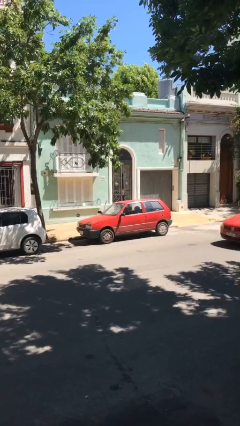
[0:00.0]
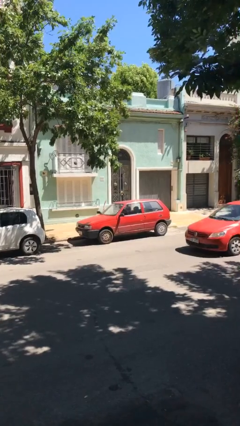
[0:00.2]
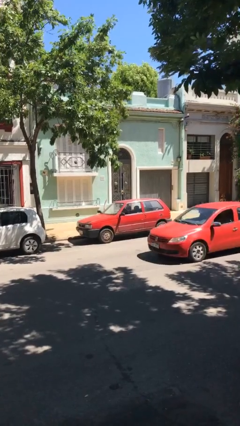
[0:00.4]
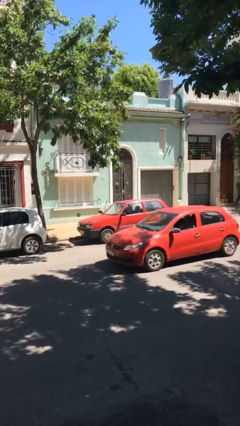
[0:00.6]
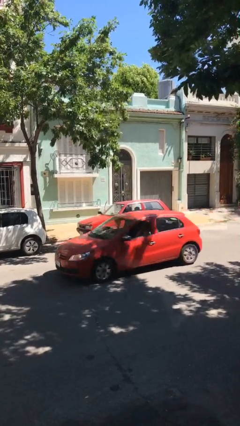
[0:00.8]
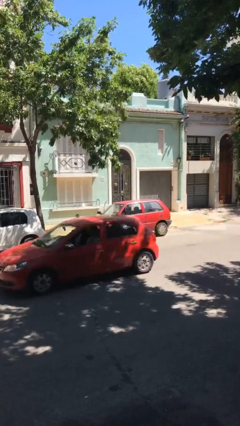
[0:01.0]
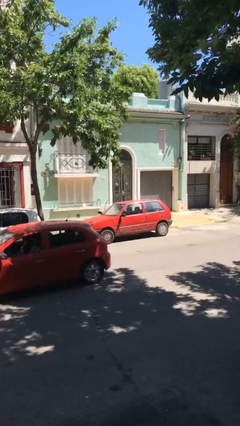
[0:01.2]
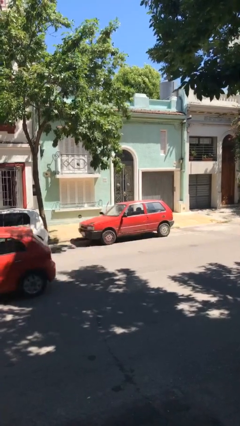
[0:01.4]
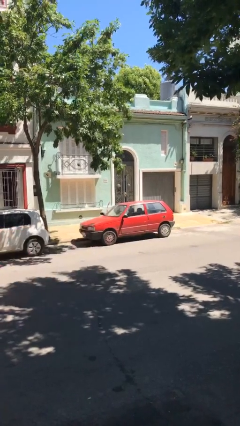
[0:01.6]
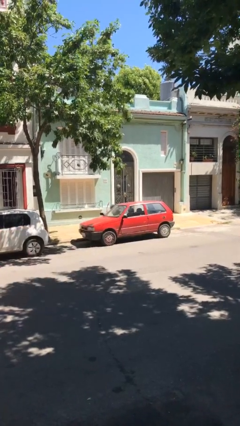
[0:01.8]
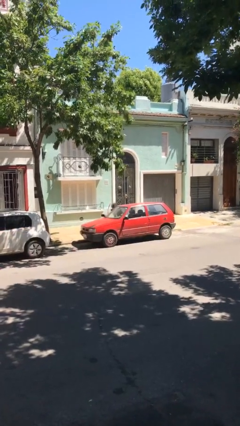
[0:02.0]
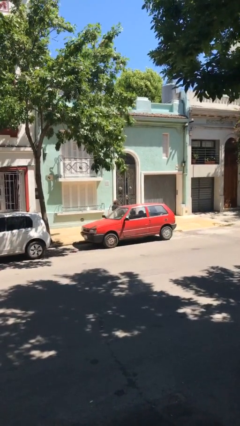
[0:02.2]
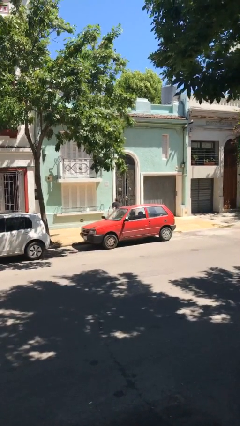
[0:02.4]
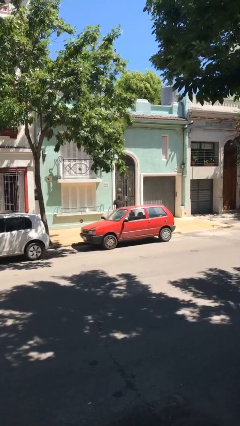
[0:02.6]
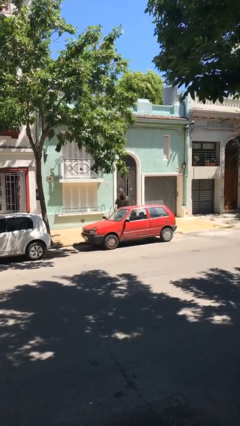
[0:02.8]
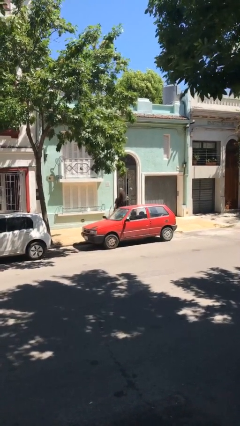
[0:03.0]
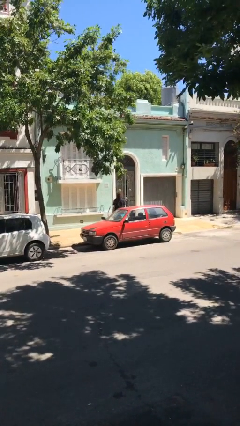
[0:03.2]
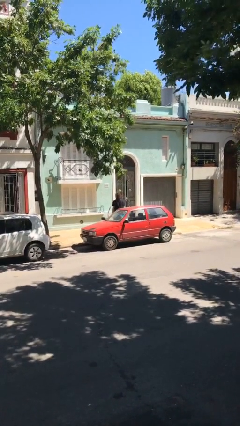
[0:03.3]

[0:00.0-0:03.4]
person exits car

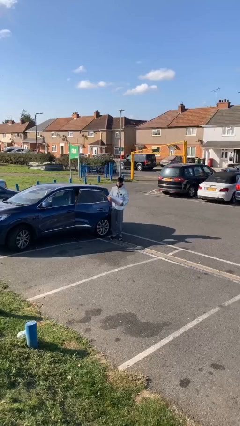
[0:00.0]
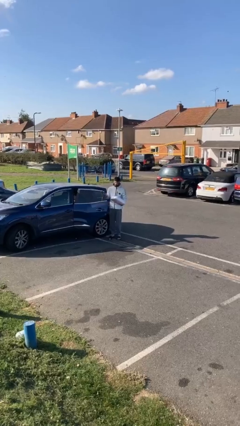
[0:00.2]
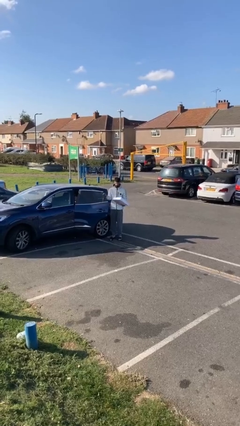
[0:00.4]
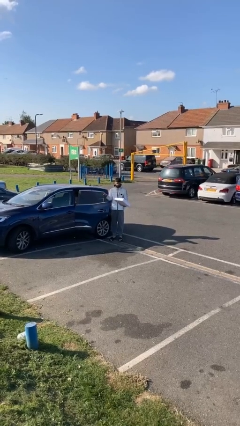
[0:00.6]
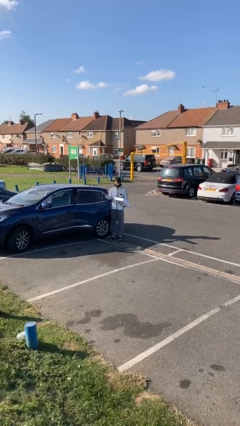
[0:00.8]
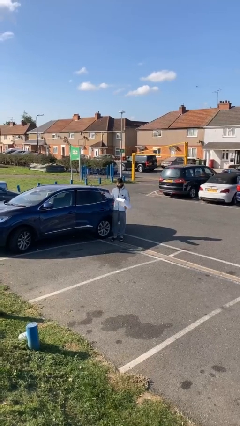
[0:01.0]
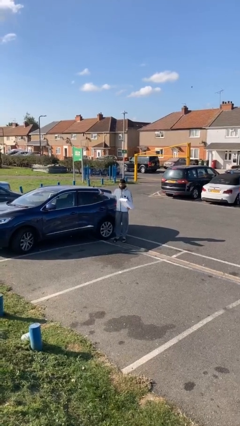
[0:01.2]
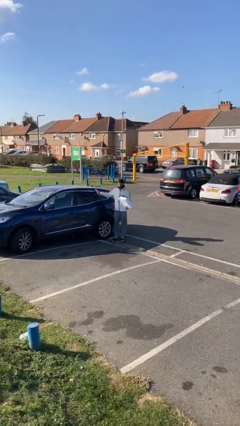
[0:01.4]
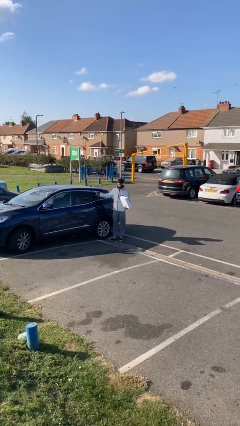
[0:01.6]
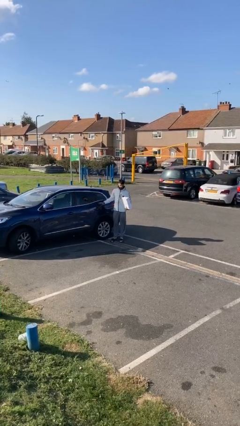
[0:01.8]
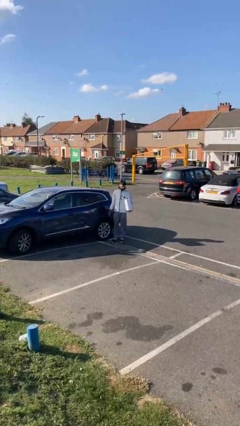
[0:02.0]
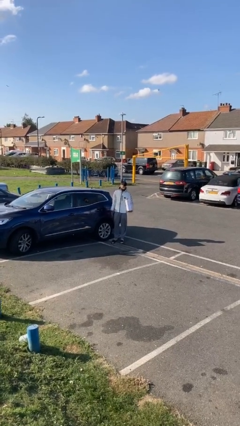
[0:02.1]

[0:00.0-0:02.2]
person closes car door

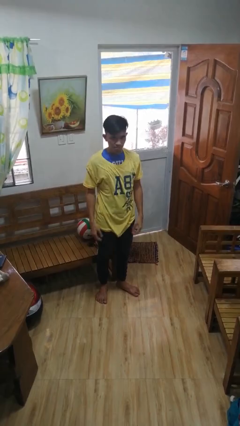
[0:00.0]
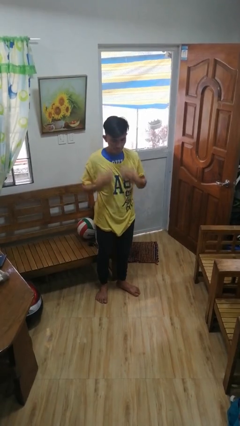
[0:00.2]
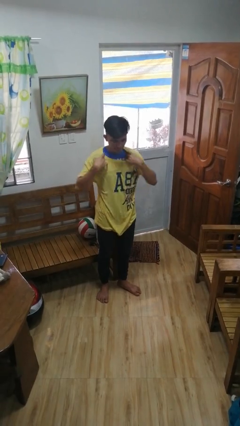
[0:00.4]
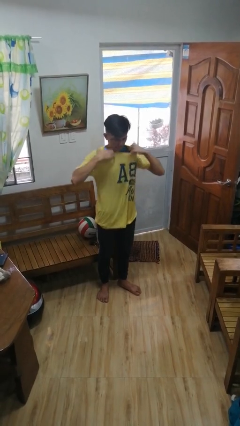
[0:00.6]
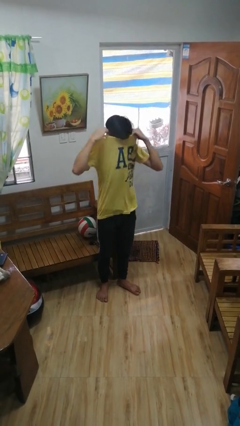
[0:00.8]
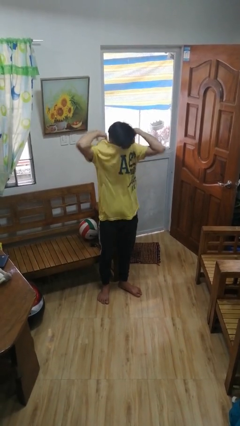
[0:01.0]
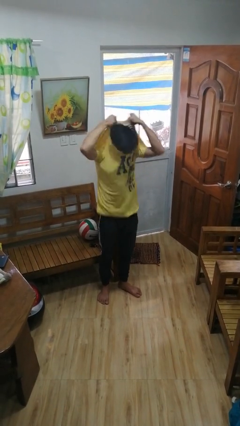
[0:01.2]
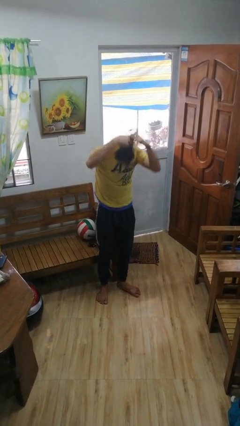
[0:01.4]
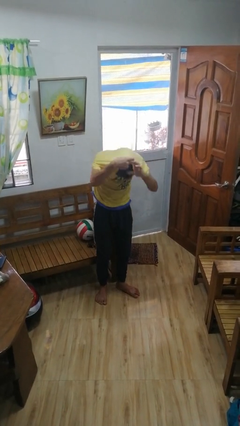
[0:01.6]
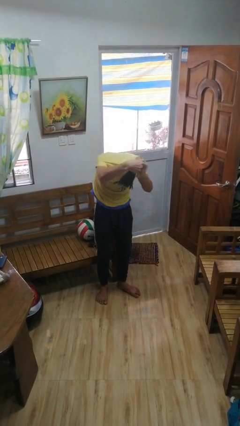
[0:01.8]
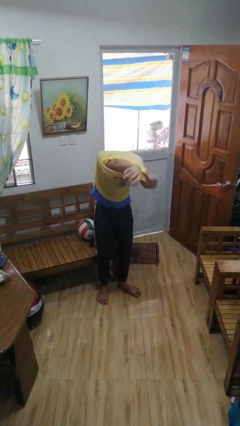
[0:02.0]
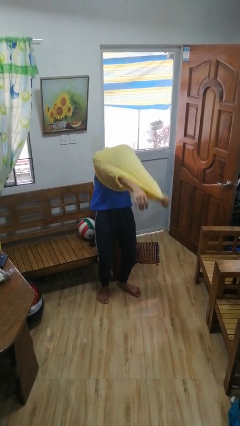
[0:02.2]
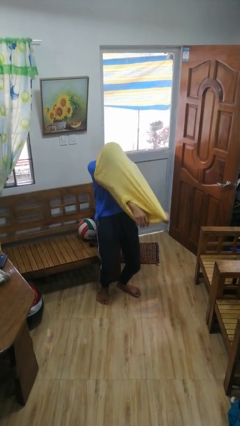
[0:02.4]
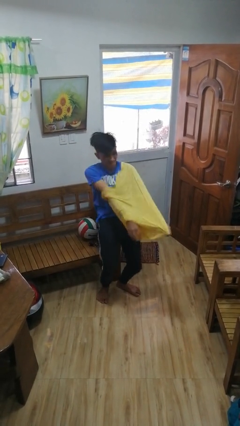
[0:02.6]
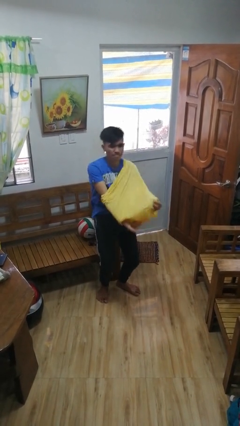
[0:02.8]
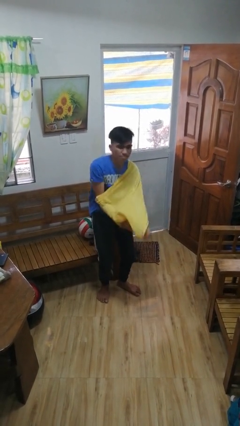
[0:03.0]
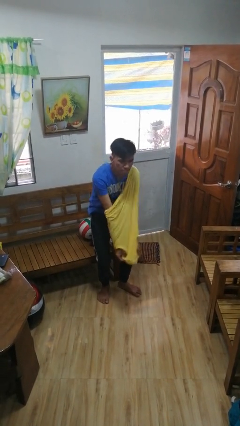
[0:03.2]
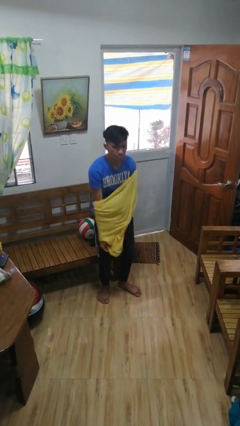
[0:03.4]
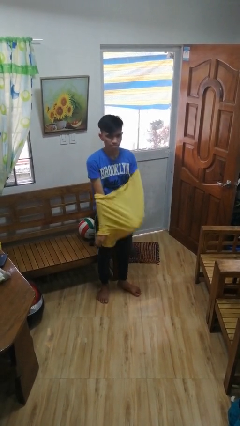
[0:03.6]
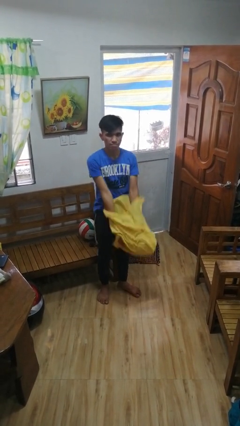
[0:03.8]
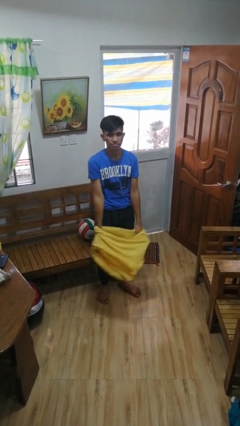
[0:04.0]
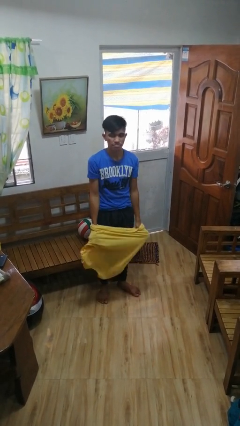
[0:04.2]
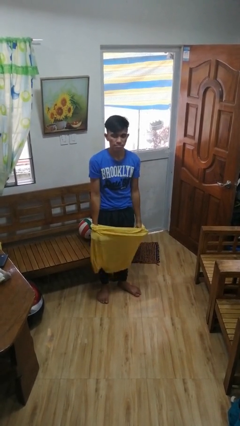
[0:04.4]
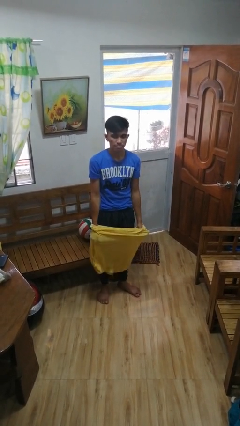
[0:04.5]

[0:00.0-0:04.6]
person takes off shirt

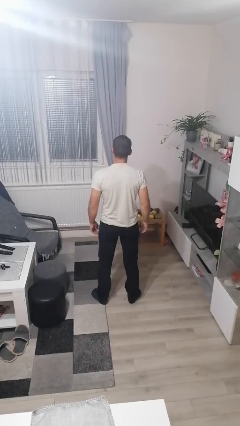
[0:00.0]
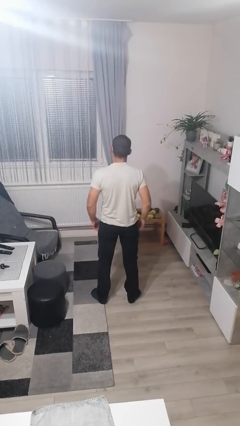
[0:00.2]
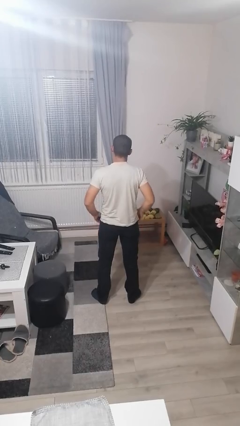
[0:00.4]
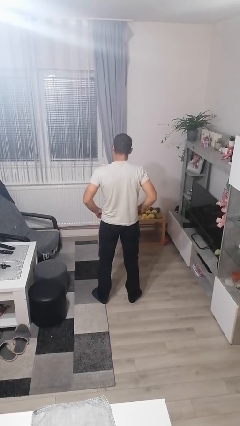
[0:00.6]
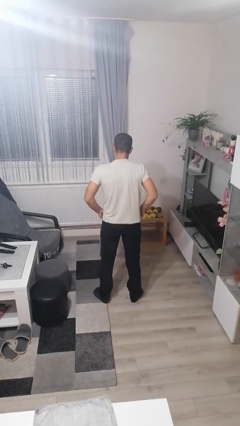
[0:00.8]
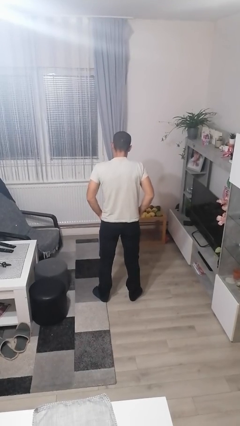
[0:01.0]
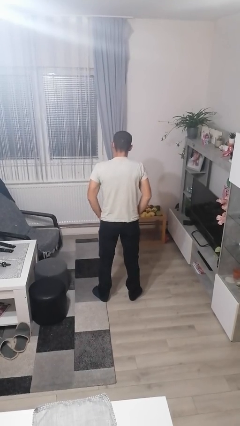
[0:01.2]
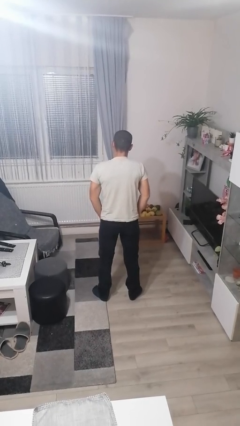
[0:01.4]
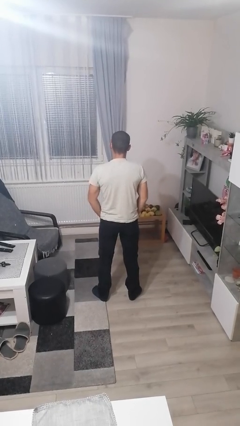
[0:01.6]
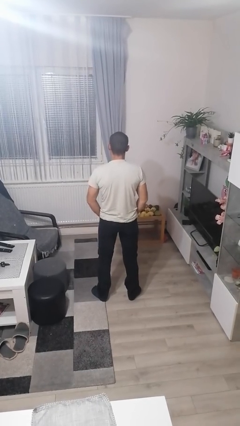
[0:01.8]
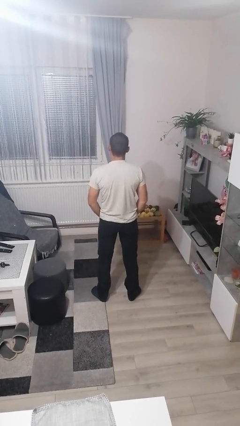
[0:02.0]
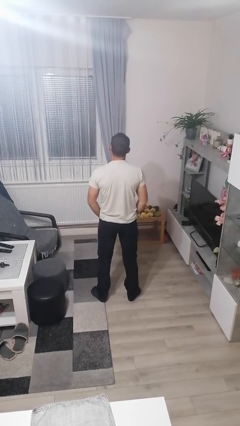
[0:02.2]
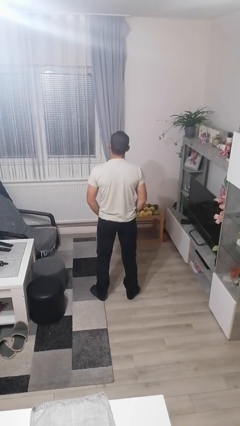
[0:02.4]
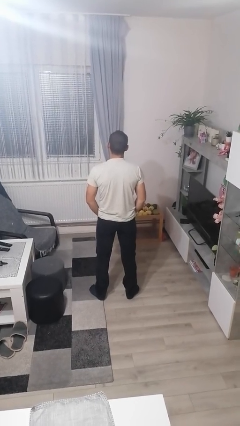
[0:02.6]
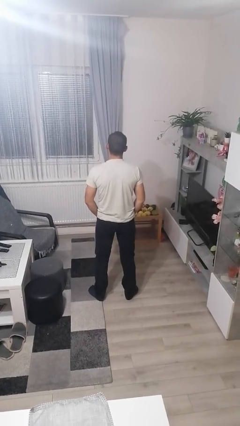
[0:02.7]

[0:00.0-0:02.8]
person puts hands in back pockets

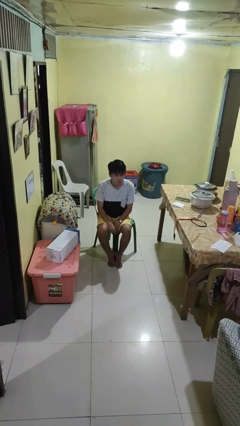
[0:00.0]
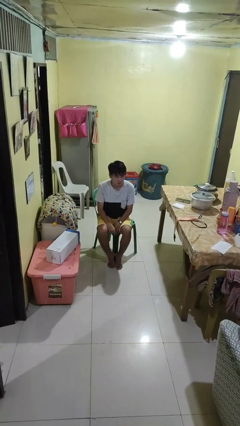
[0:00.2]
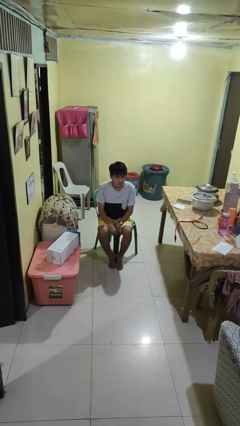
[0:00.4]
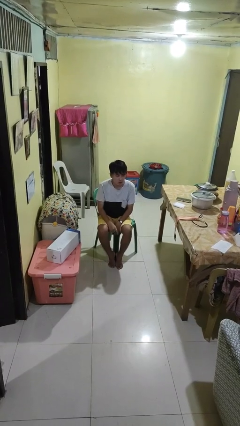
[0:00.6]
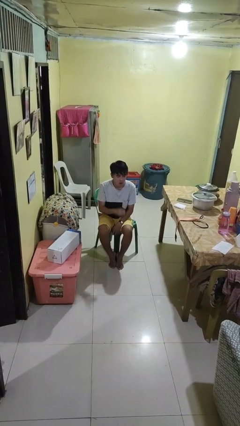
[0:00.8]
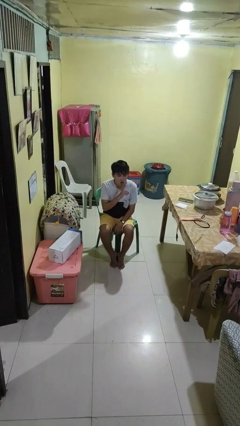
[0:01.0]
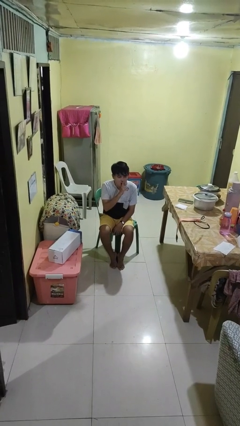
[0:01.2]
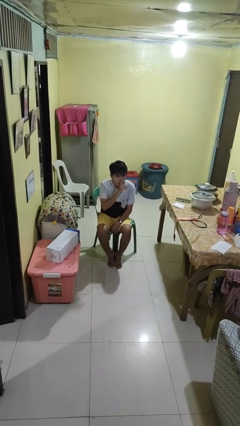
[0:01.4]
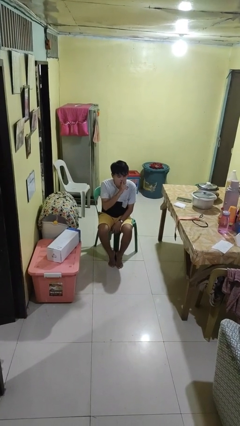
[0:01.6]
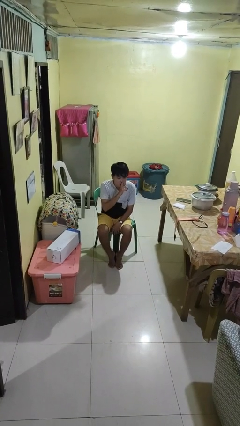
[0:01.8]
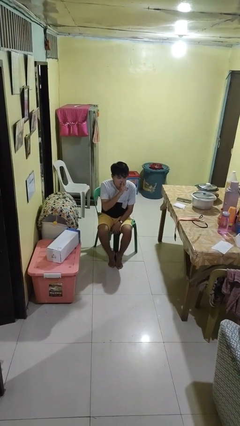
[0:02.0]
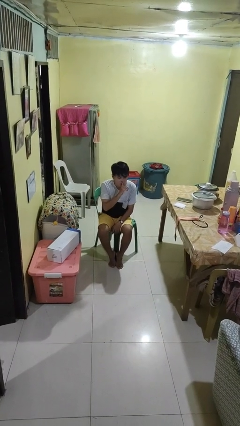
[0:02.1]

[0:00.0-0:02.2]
person gestures be quiet

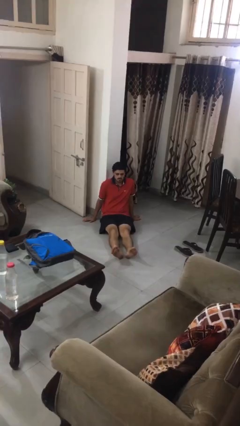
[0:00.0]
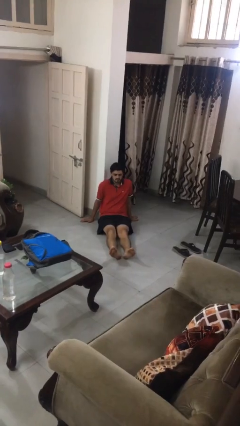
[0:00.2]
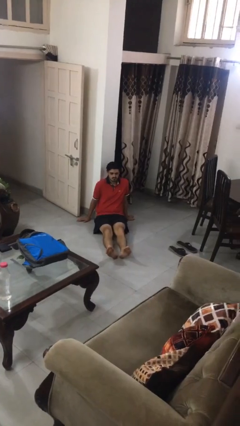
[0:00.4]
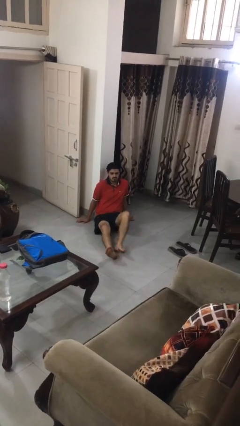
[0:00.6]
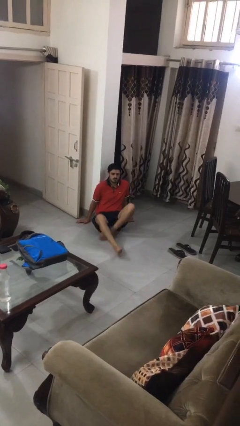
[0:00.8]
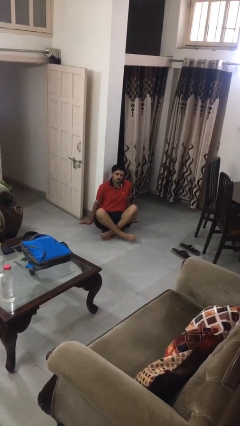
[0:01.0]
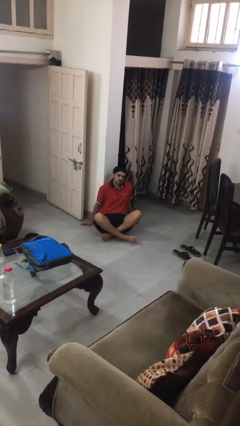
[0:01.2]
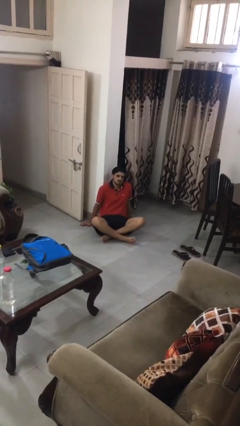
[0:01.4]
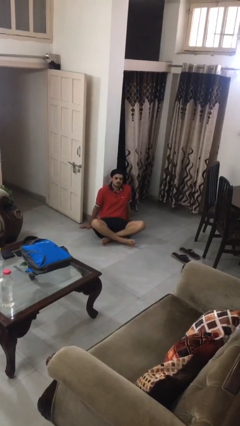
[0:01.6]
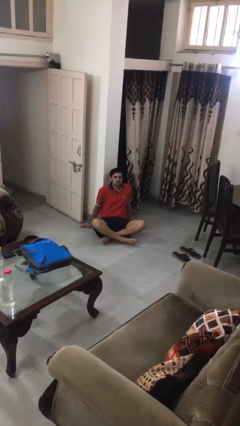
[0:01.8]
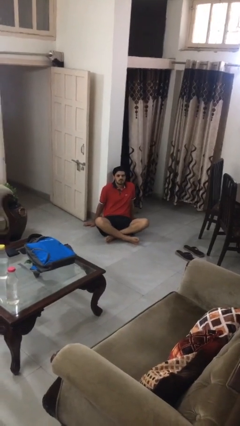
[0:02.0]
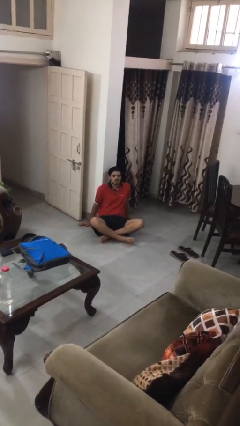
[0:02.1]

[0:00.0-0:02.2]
person crosses legs
